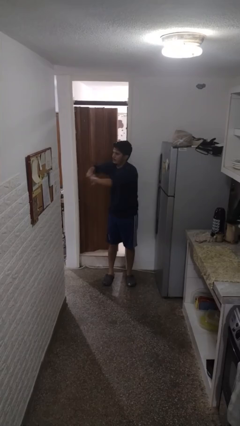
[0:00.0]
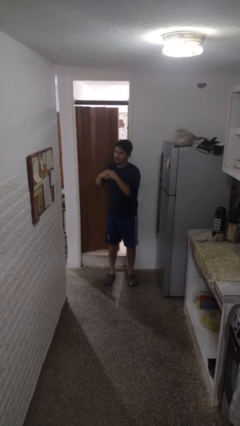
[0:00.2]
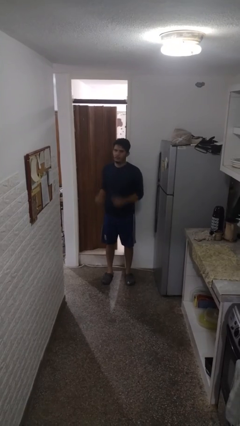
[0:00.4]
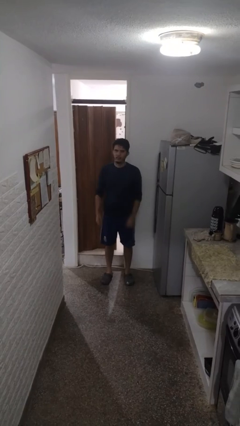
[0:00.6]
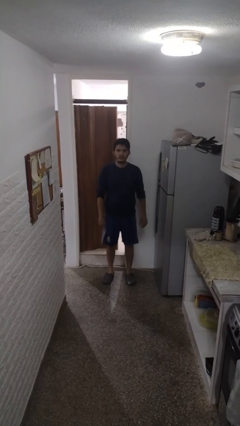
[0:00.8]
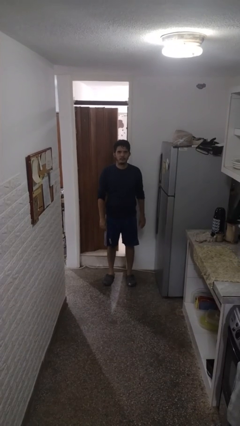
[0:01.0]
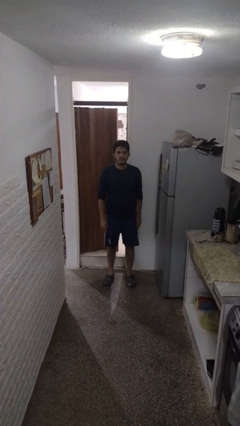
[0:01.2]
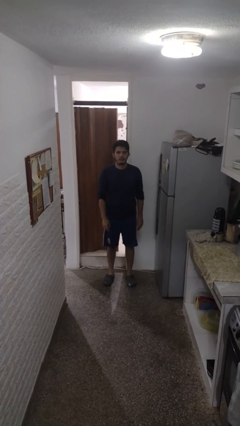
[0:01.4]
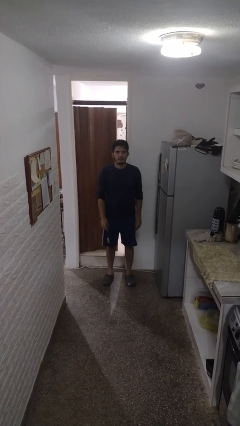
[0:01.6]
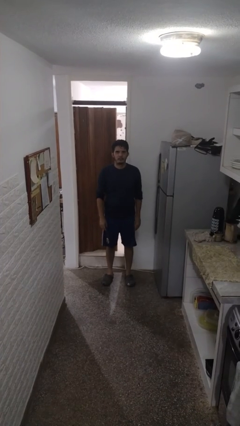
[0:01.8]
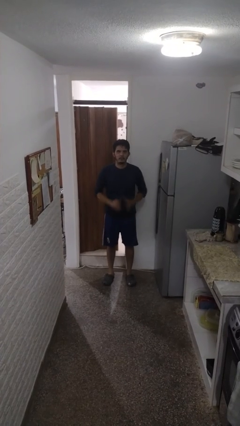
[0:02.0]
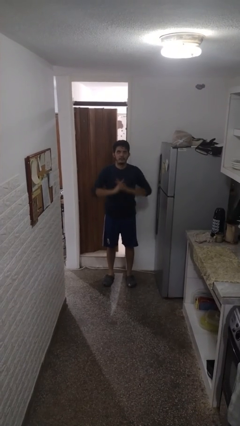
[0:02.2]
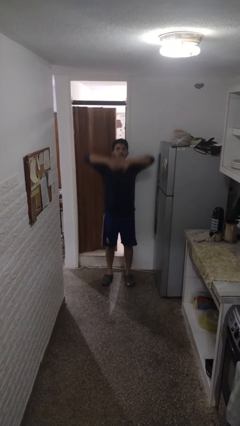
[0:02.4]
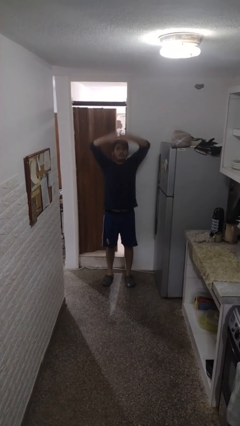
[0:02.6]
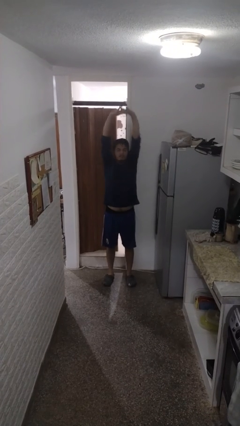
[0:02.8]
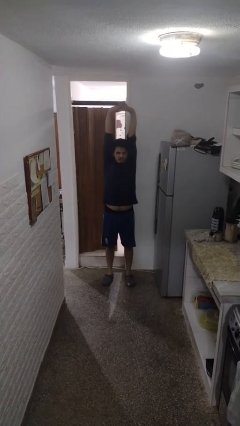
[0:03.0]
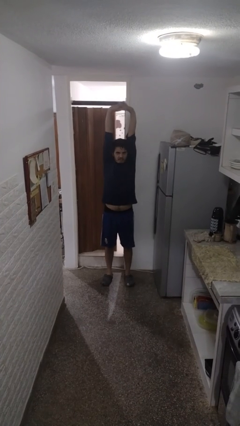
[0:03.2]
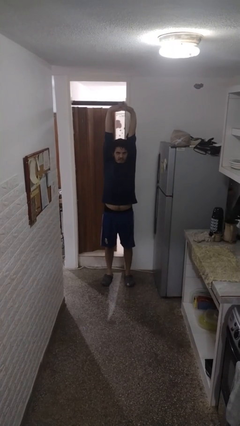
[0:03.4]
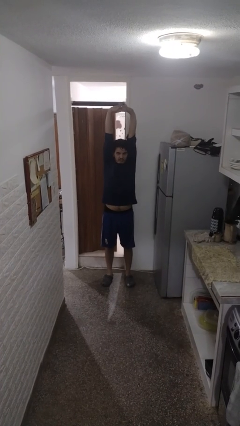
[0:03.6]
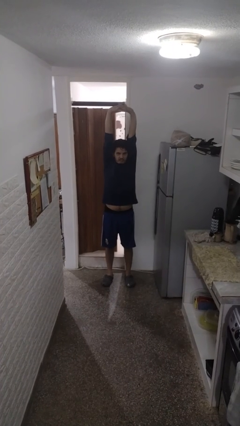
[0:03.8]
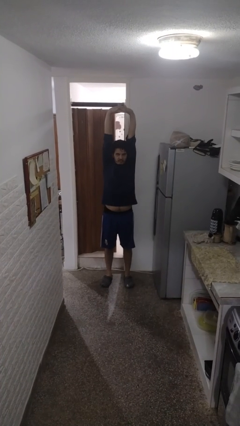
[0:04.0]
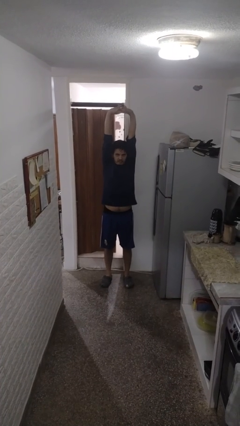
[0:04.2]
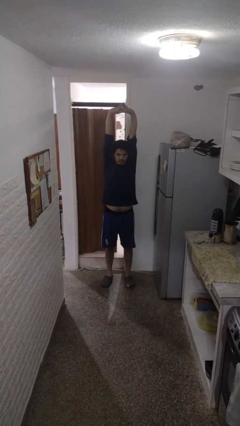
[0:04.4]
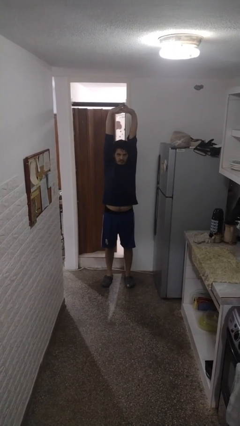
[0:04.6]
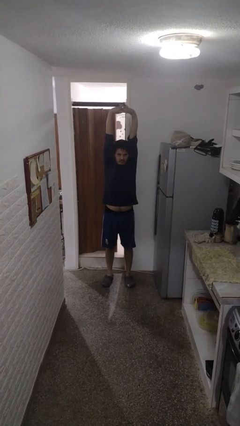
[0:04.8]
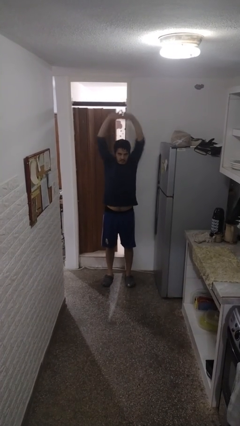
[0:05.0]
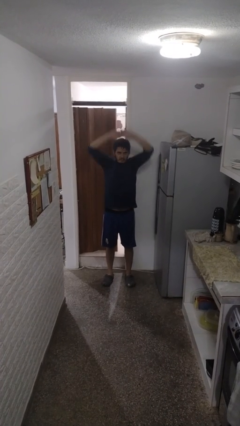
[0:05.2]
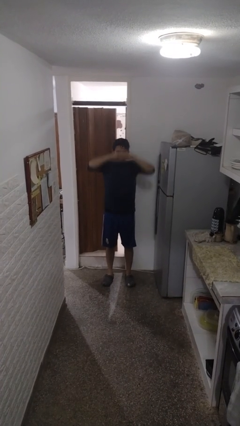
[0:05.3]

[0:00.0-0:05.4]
person stretches arms over head

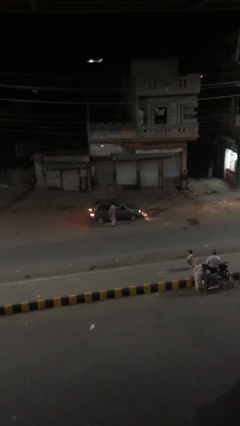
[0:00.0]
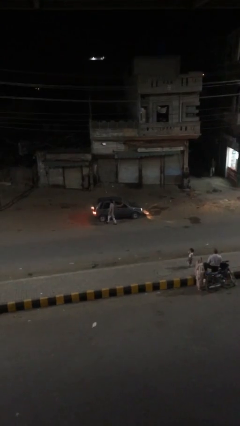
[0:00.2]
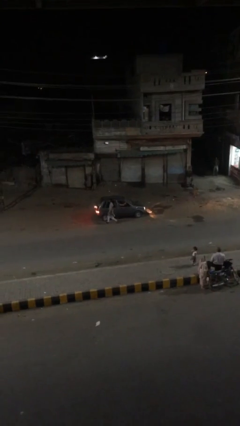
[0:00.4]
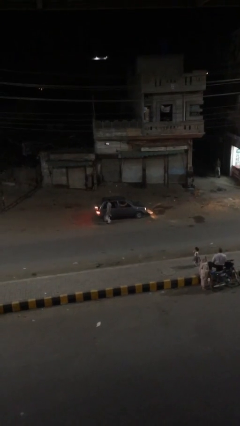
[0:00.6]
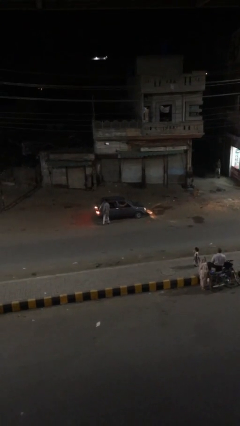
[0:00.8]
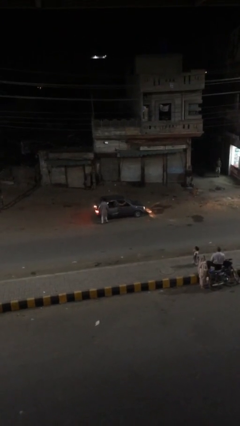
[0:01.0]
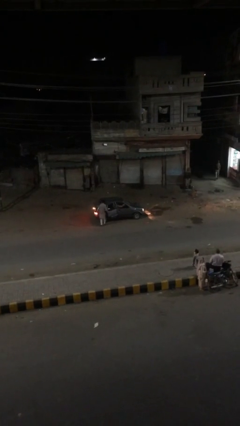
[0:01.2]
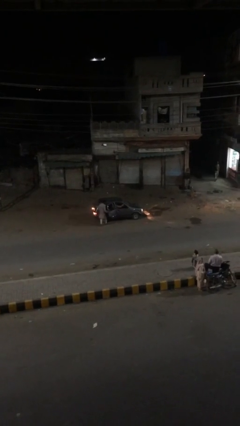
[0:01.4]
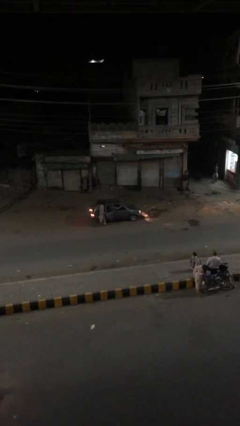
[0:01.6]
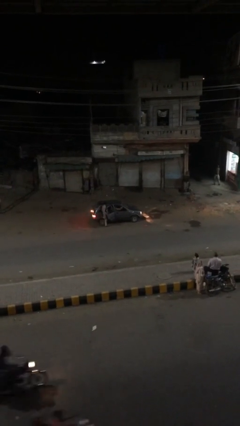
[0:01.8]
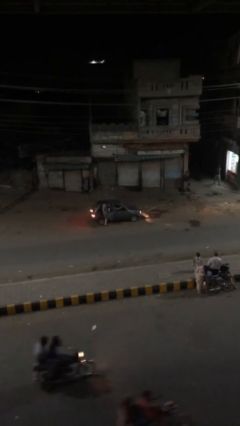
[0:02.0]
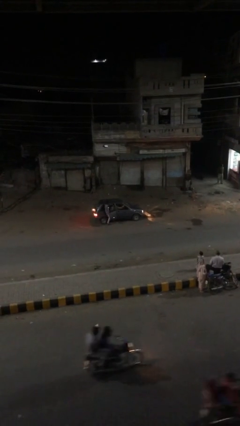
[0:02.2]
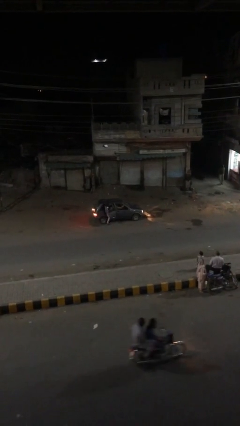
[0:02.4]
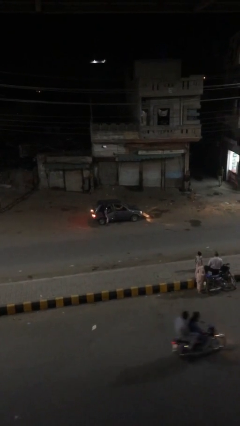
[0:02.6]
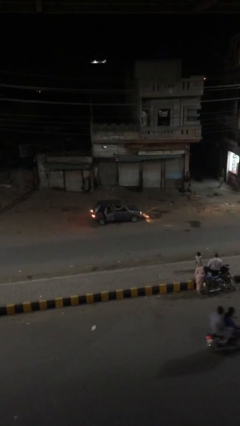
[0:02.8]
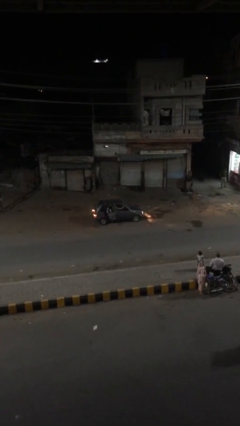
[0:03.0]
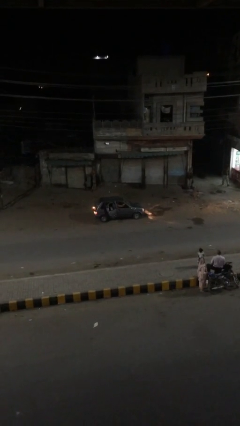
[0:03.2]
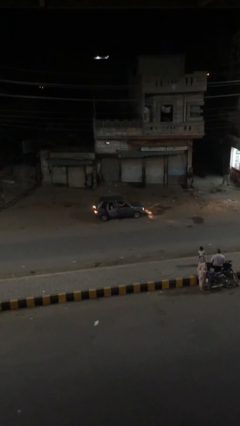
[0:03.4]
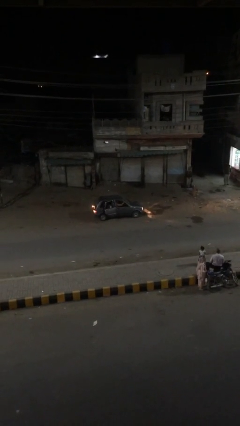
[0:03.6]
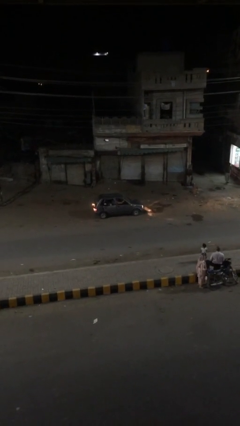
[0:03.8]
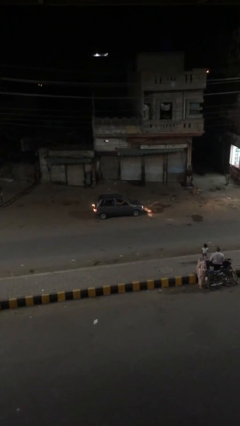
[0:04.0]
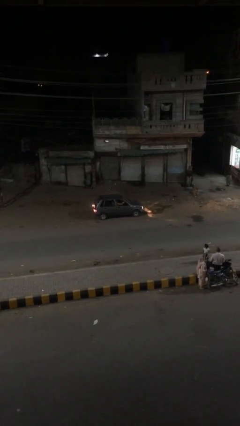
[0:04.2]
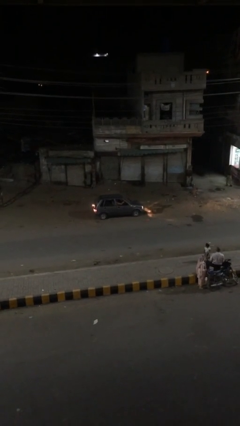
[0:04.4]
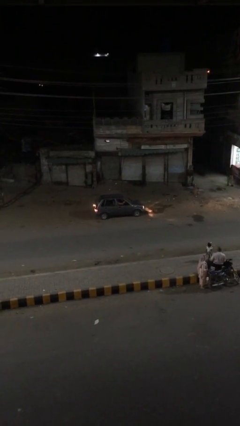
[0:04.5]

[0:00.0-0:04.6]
car picks up person

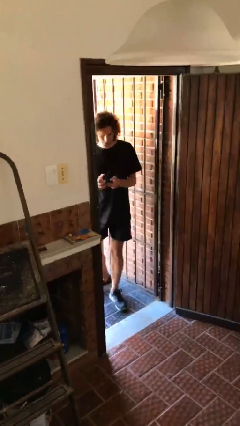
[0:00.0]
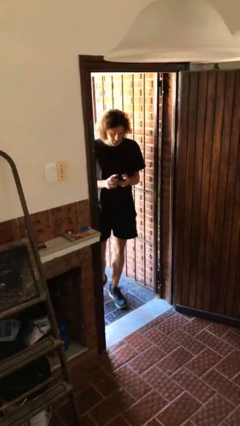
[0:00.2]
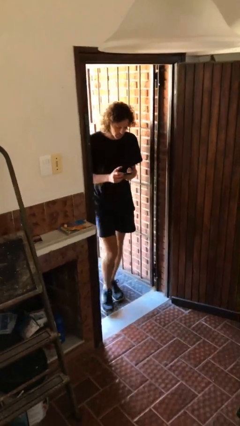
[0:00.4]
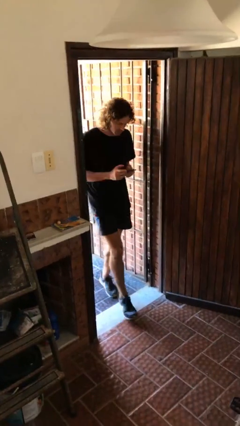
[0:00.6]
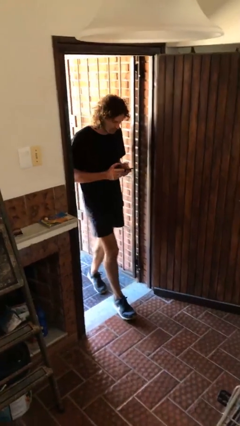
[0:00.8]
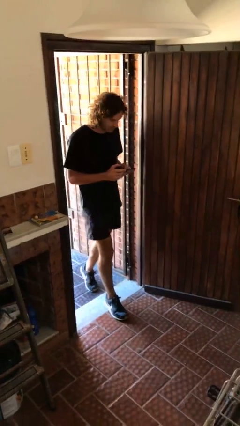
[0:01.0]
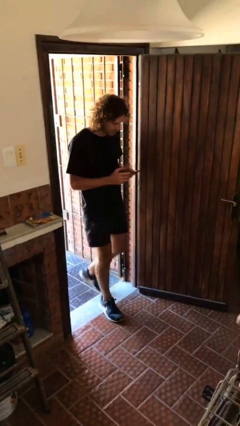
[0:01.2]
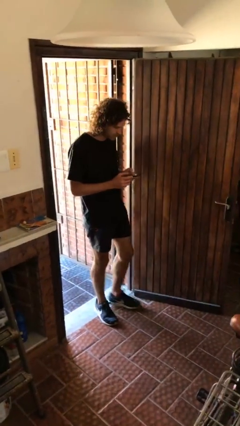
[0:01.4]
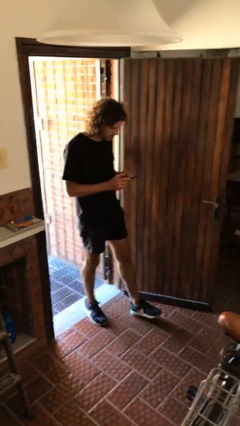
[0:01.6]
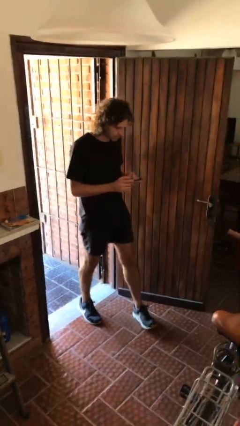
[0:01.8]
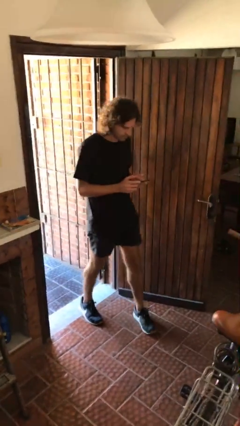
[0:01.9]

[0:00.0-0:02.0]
person enters scene through structure

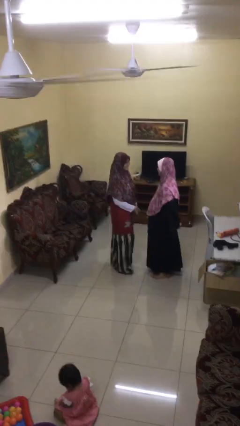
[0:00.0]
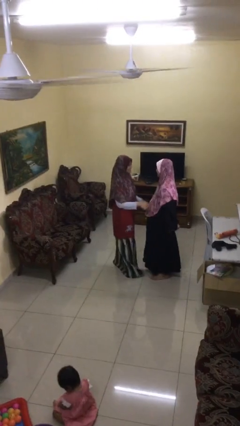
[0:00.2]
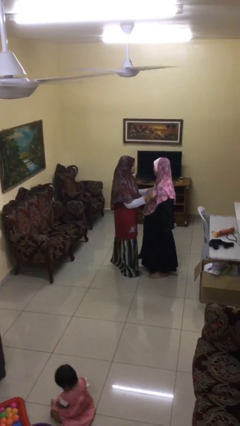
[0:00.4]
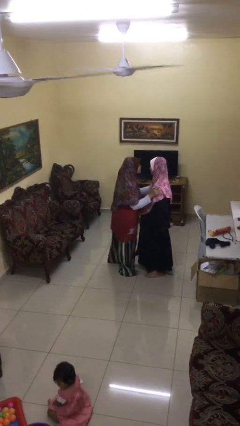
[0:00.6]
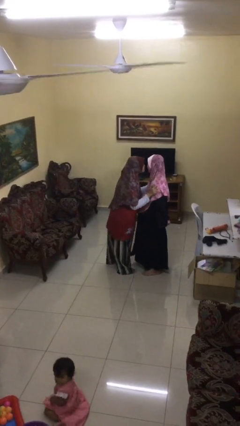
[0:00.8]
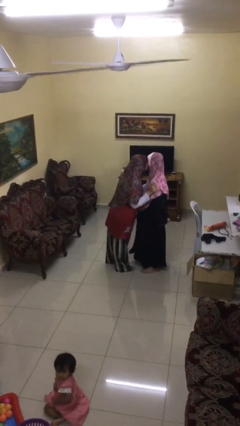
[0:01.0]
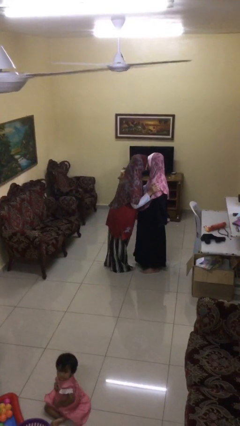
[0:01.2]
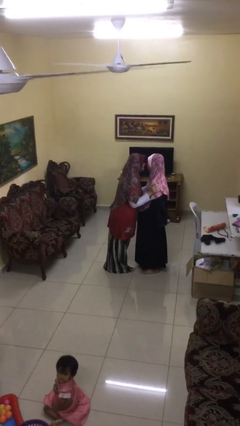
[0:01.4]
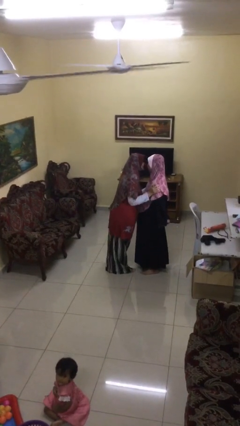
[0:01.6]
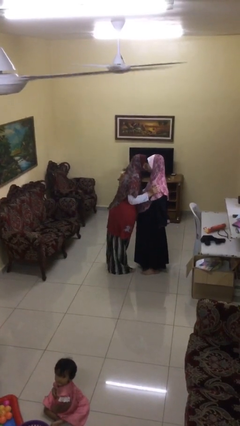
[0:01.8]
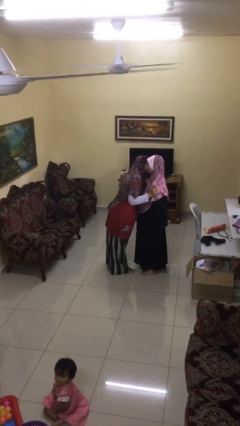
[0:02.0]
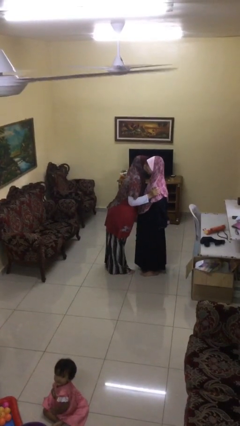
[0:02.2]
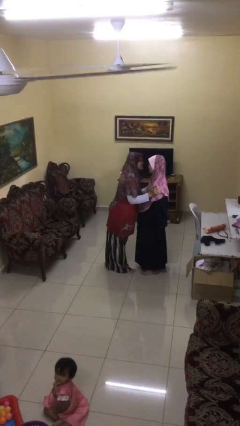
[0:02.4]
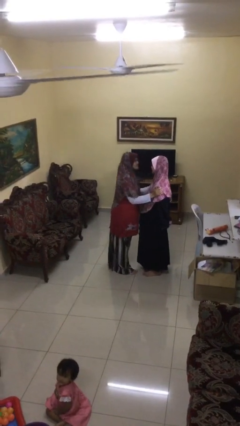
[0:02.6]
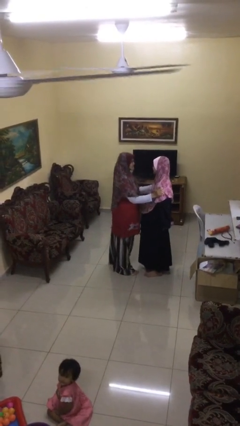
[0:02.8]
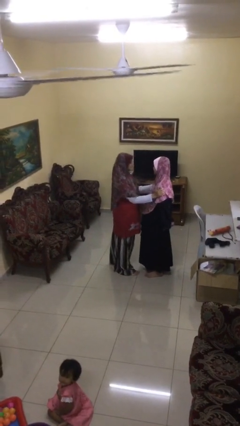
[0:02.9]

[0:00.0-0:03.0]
person kisses cheek of person

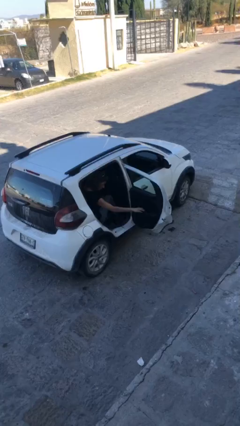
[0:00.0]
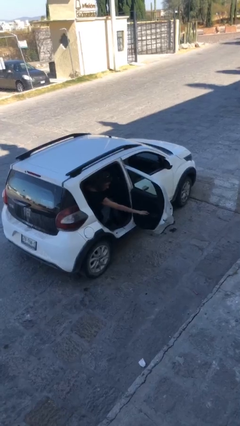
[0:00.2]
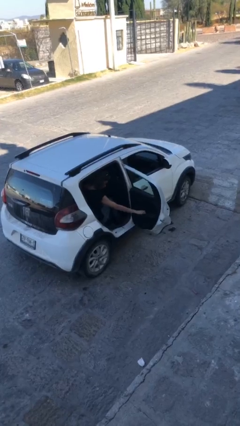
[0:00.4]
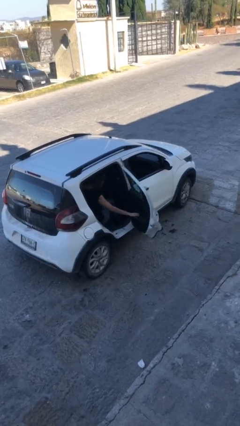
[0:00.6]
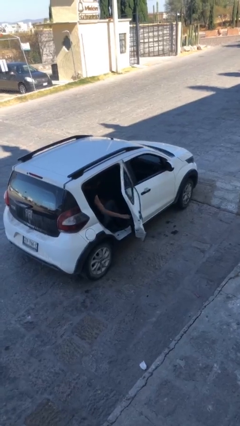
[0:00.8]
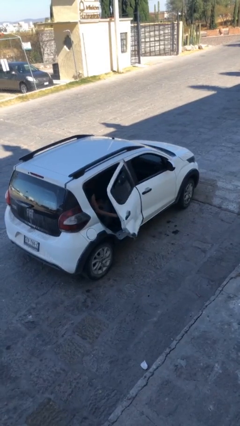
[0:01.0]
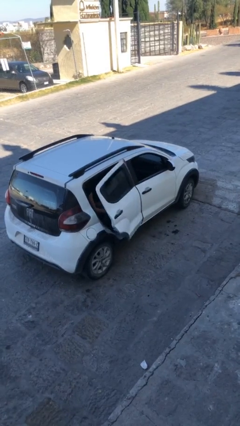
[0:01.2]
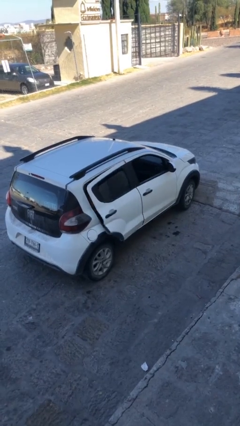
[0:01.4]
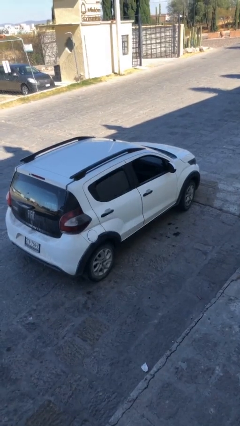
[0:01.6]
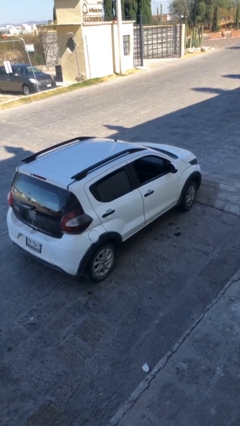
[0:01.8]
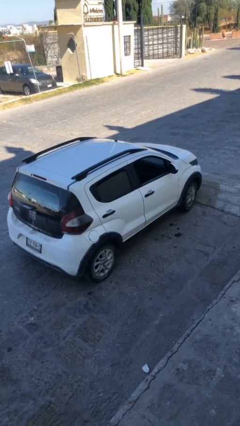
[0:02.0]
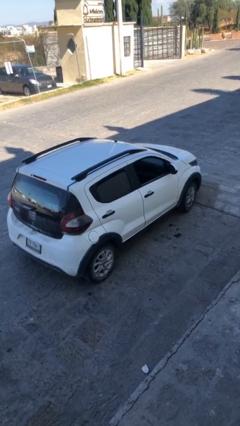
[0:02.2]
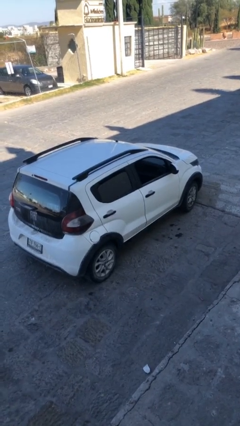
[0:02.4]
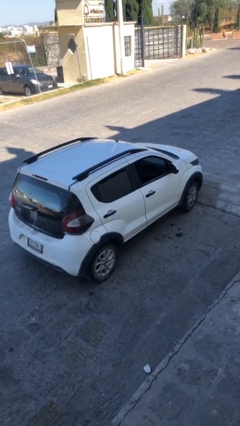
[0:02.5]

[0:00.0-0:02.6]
person closes car door
